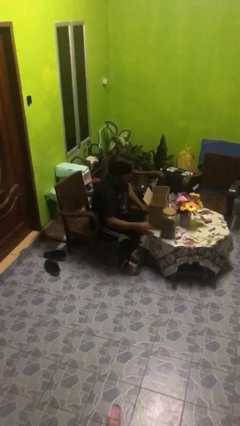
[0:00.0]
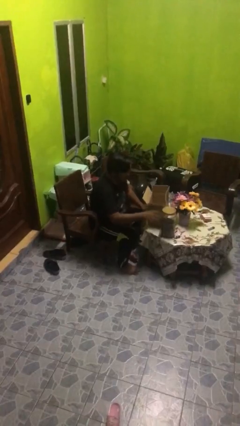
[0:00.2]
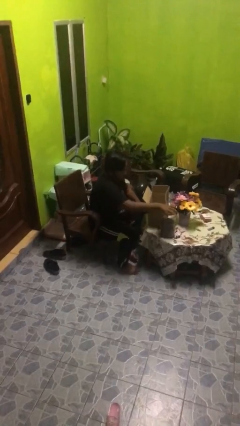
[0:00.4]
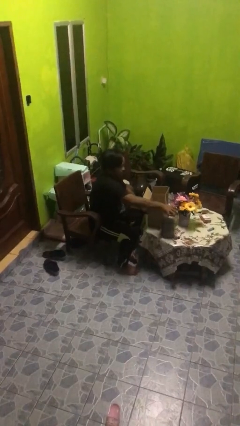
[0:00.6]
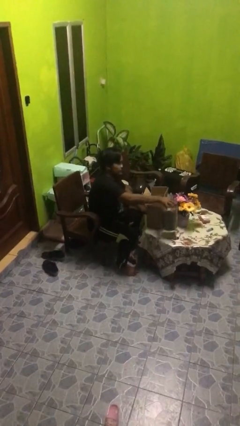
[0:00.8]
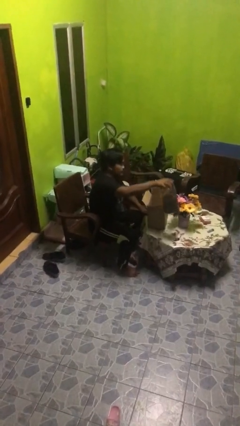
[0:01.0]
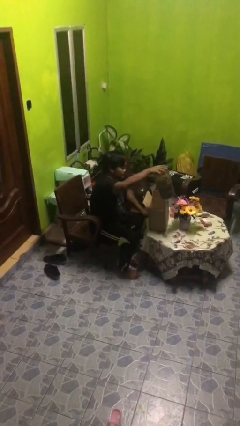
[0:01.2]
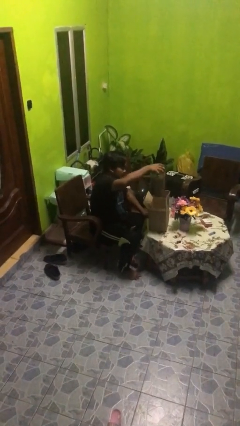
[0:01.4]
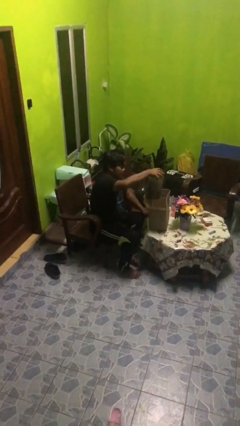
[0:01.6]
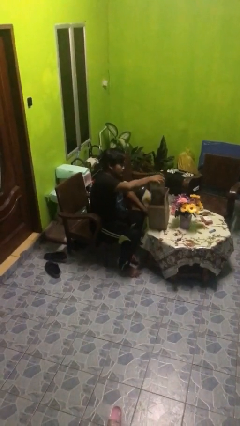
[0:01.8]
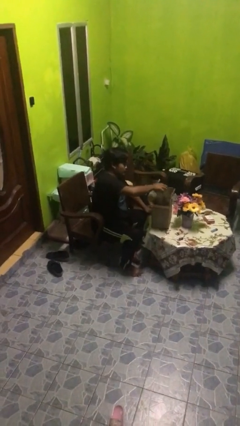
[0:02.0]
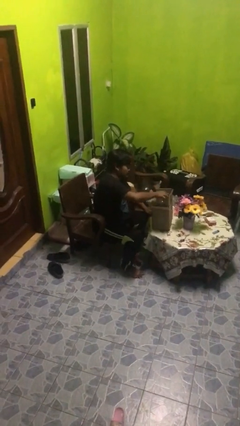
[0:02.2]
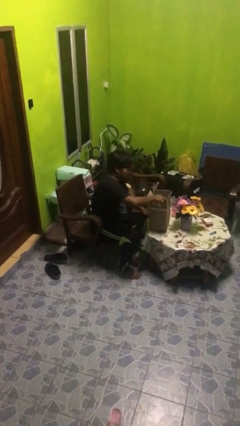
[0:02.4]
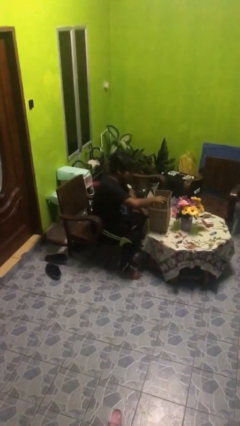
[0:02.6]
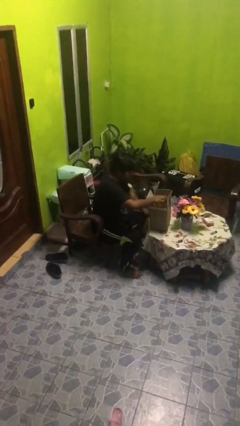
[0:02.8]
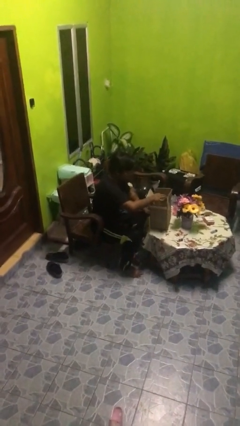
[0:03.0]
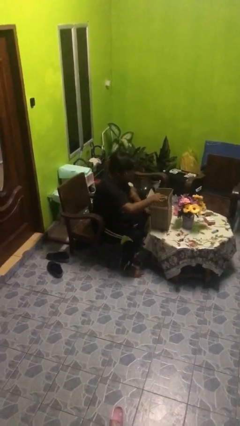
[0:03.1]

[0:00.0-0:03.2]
person puts object into box

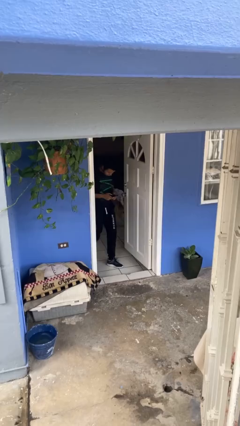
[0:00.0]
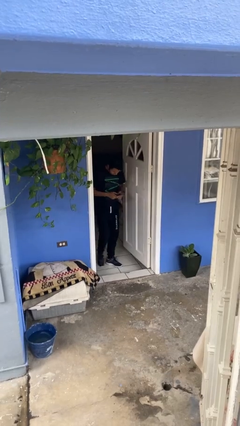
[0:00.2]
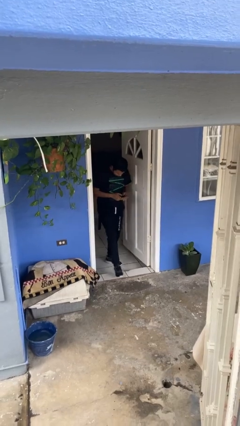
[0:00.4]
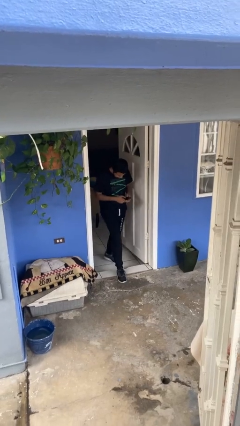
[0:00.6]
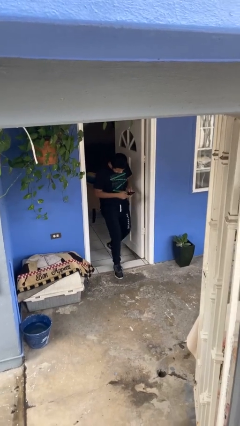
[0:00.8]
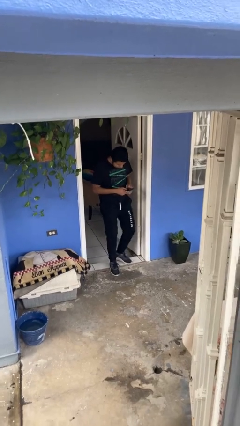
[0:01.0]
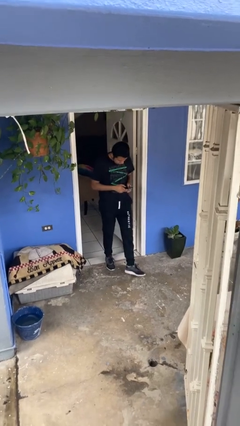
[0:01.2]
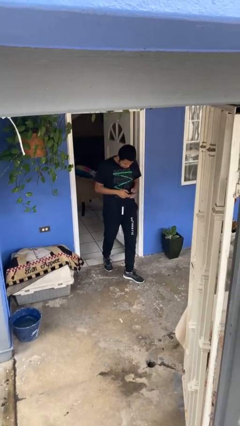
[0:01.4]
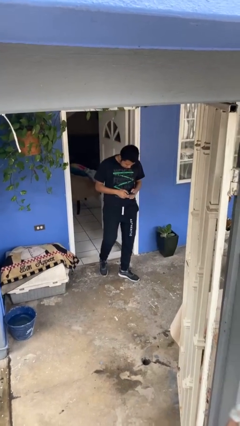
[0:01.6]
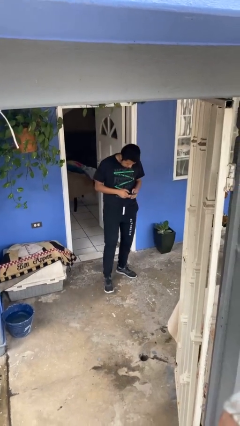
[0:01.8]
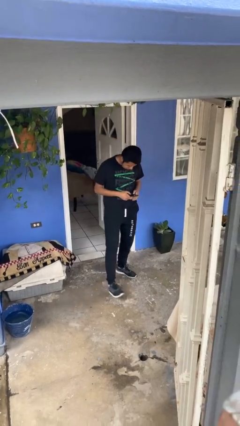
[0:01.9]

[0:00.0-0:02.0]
person enters scene through structure

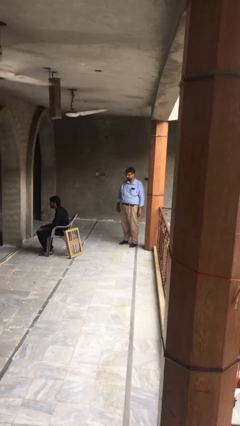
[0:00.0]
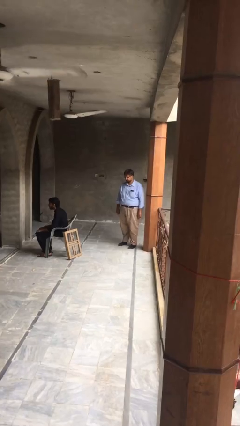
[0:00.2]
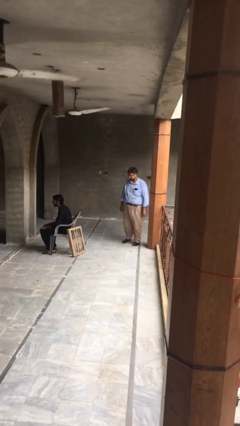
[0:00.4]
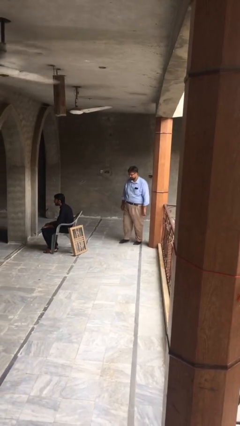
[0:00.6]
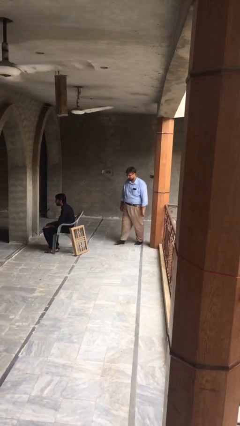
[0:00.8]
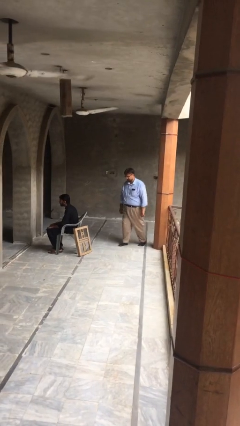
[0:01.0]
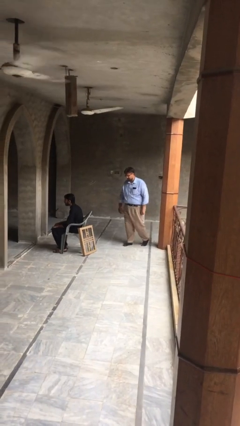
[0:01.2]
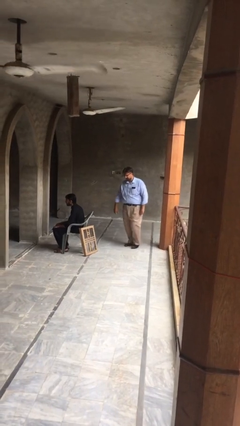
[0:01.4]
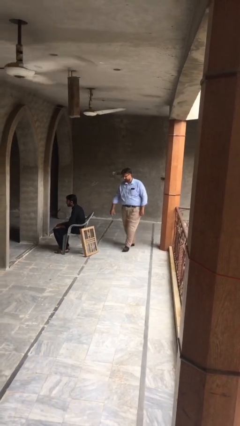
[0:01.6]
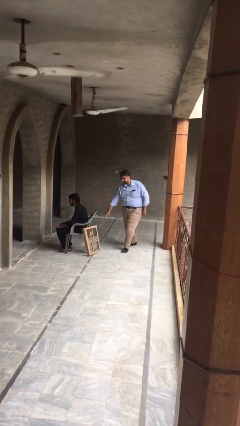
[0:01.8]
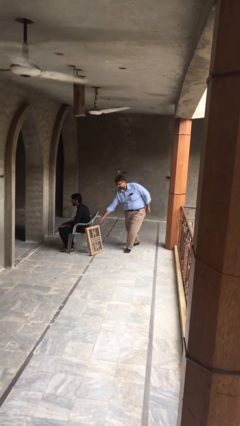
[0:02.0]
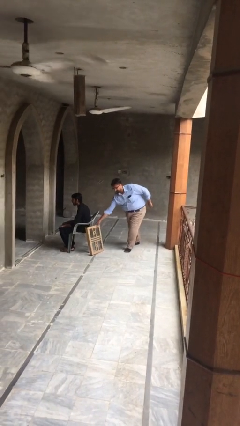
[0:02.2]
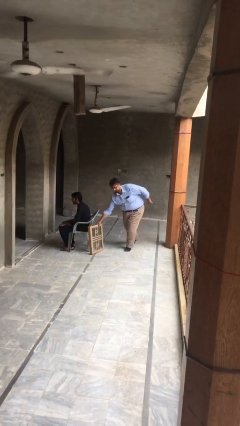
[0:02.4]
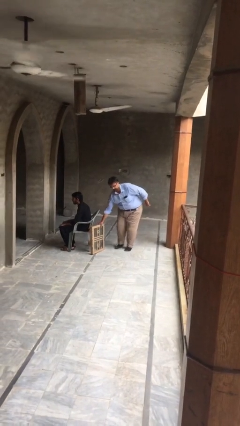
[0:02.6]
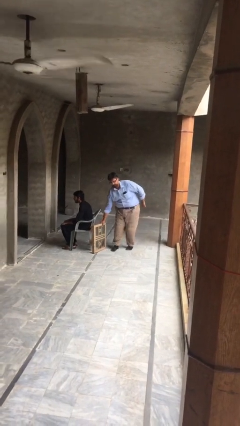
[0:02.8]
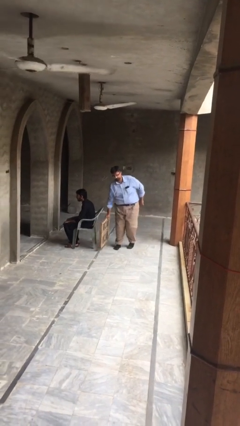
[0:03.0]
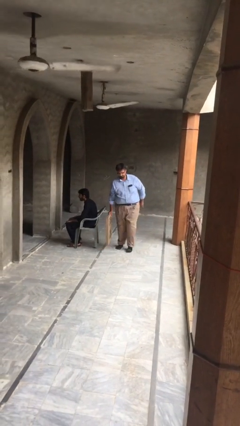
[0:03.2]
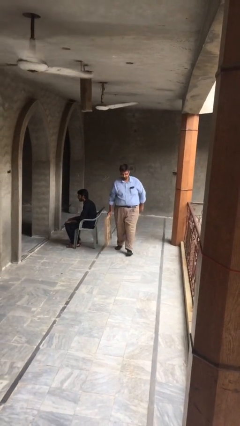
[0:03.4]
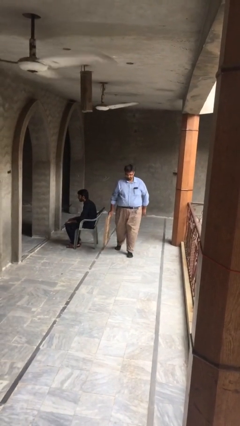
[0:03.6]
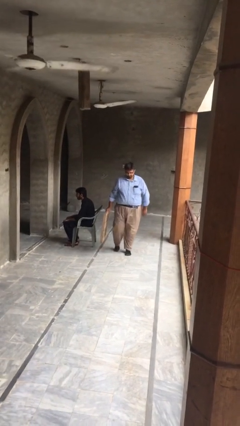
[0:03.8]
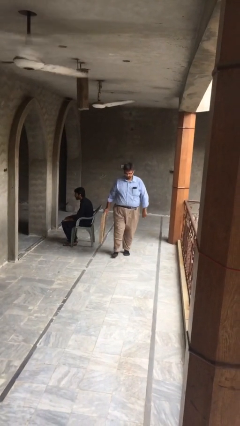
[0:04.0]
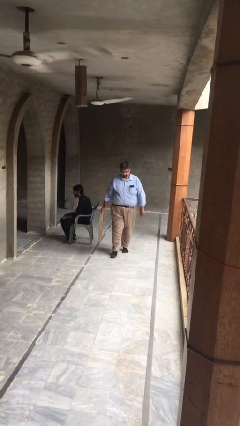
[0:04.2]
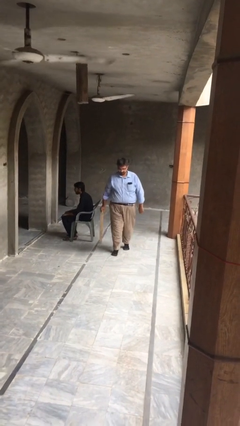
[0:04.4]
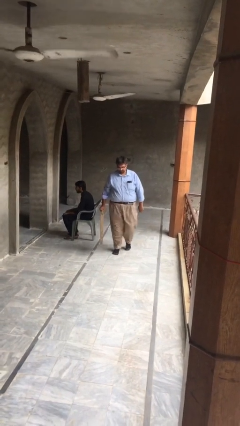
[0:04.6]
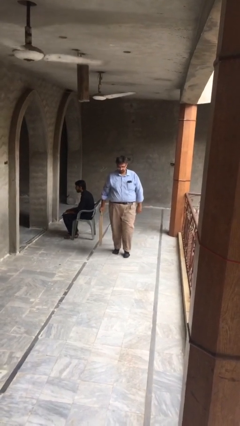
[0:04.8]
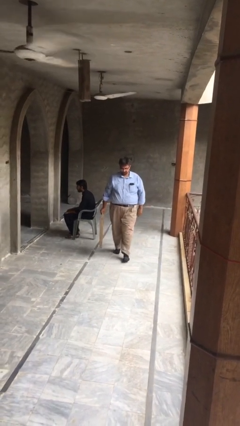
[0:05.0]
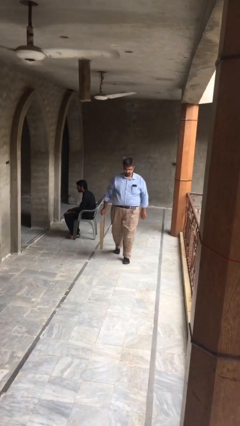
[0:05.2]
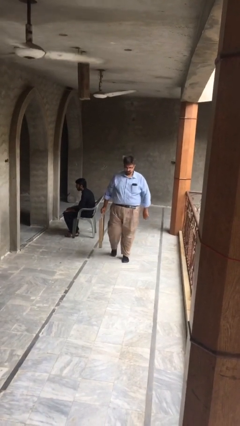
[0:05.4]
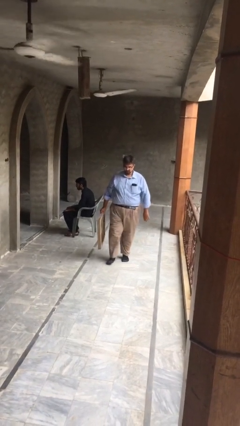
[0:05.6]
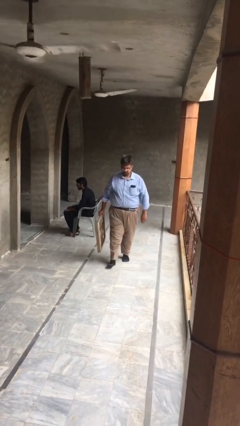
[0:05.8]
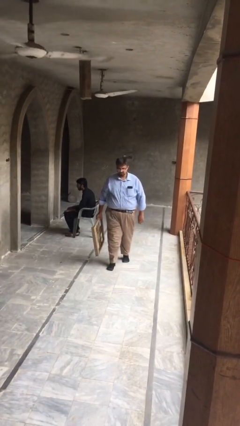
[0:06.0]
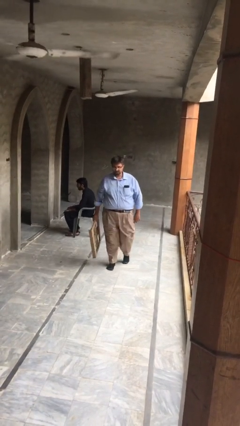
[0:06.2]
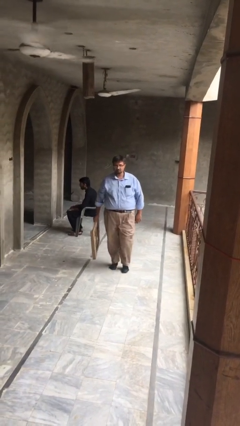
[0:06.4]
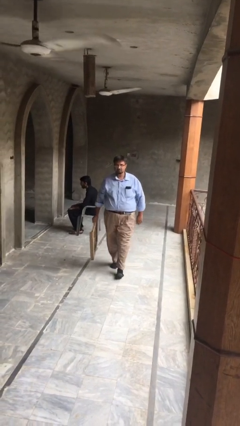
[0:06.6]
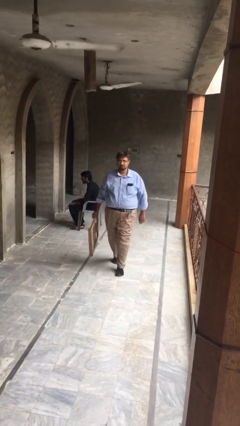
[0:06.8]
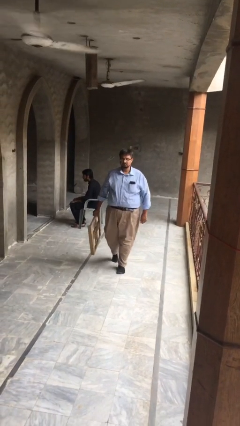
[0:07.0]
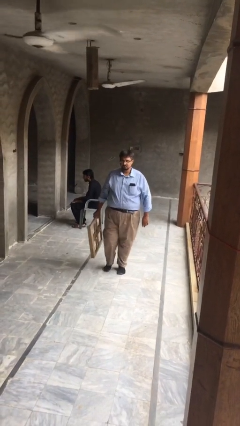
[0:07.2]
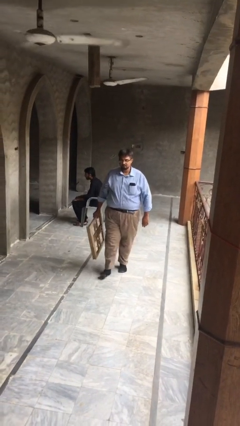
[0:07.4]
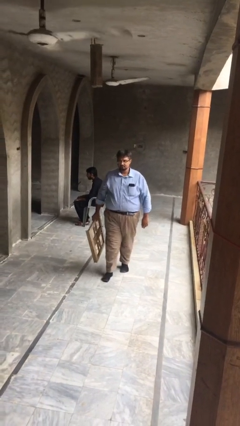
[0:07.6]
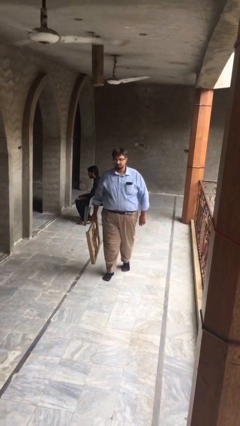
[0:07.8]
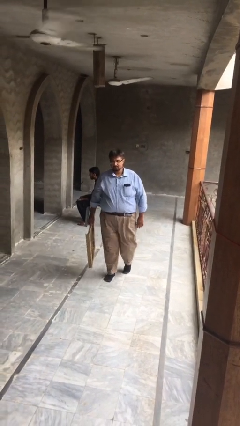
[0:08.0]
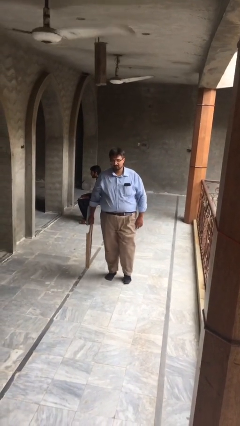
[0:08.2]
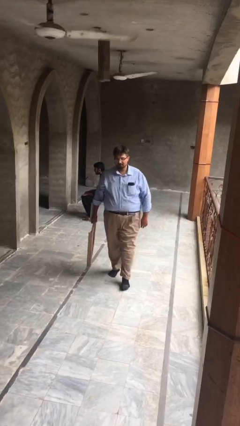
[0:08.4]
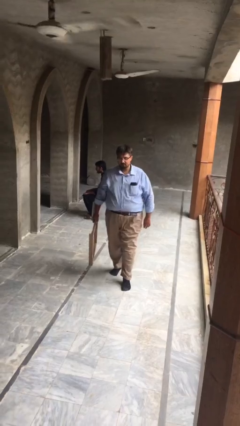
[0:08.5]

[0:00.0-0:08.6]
person steals object from person

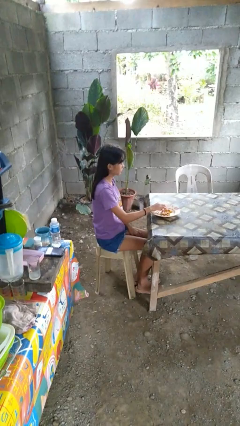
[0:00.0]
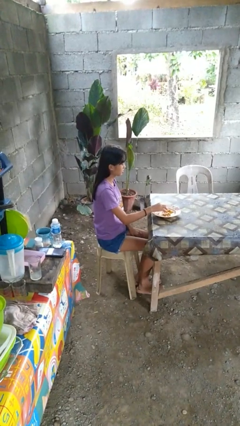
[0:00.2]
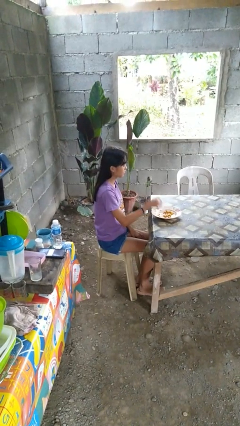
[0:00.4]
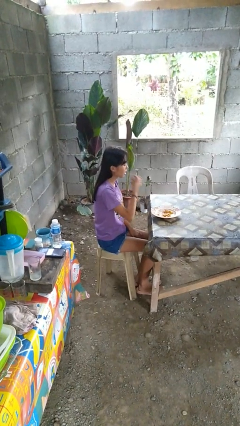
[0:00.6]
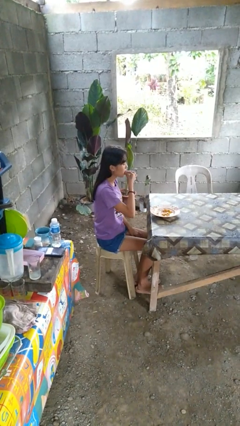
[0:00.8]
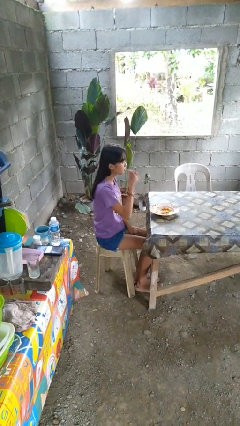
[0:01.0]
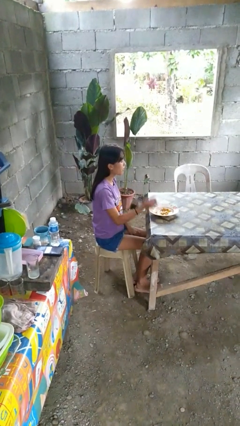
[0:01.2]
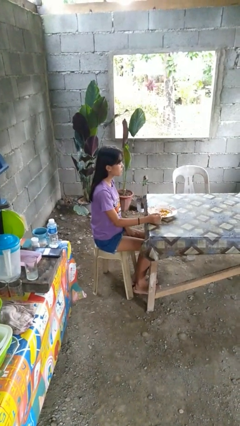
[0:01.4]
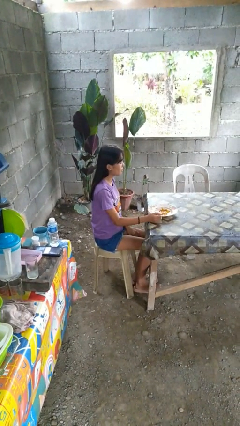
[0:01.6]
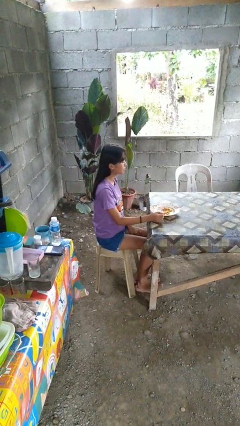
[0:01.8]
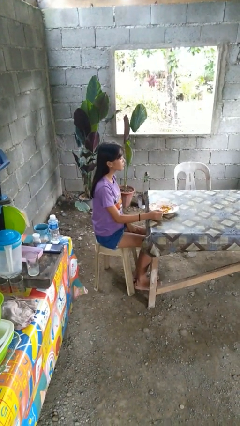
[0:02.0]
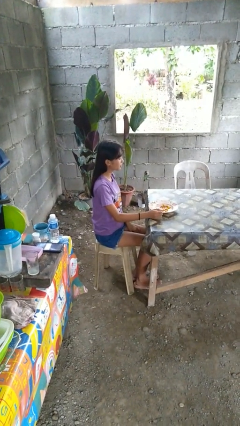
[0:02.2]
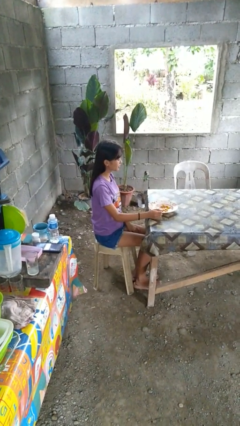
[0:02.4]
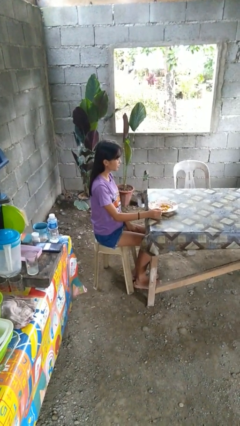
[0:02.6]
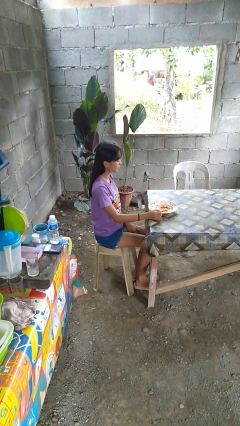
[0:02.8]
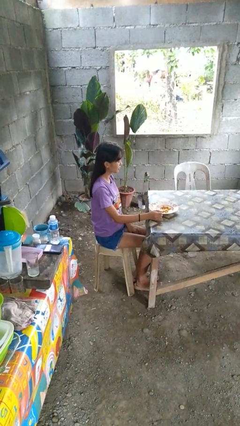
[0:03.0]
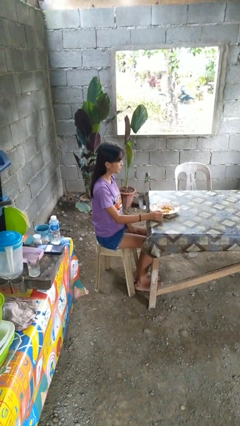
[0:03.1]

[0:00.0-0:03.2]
person eats with hands

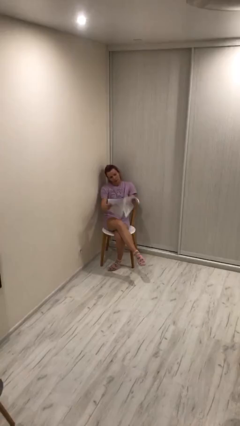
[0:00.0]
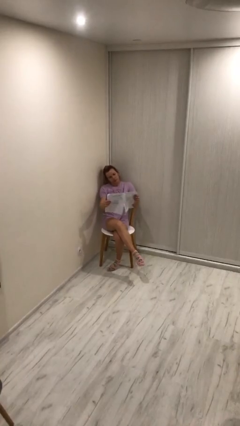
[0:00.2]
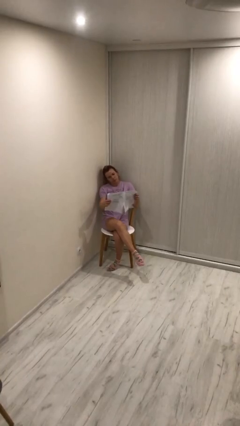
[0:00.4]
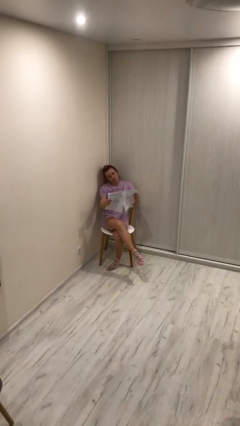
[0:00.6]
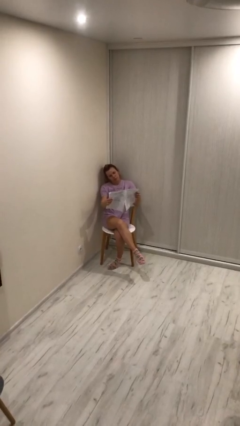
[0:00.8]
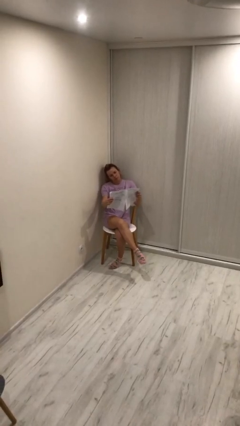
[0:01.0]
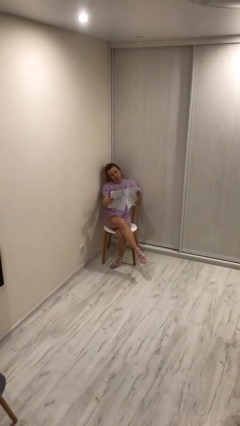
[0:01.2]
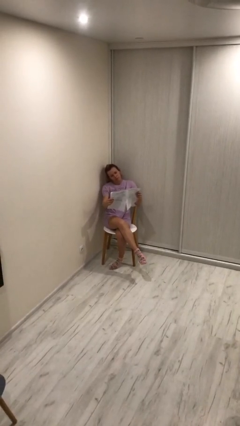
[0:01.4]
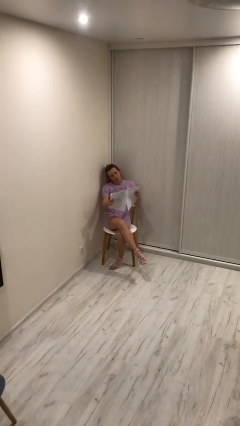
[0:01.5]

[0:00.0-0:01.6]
person reads newspaper
